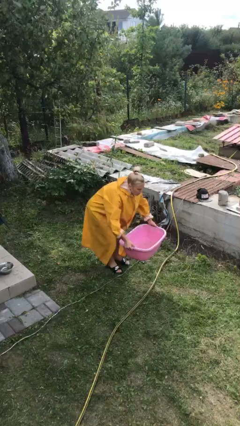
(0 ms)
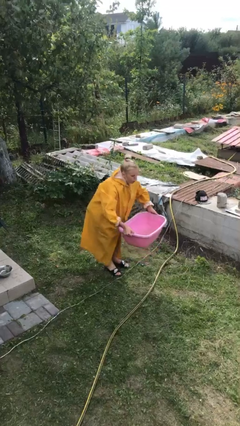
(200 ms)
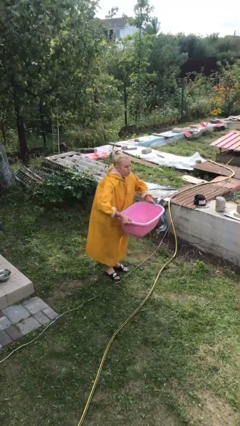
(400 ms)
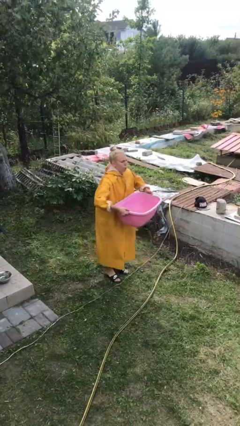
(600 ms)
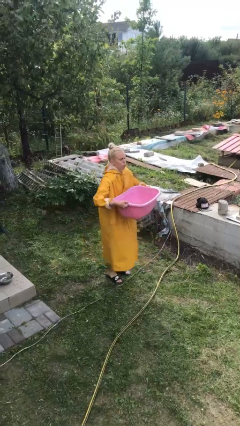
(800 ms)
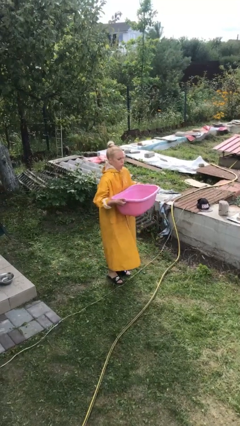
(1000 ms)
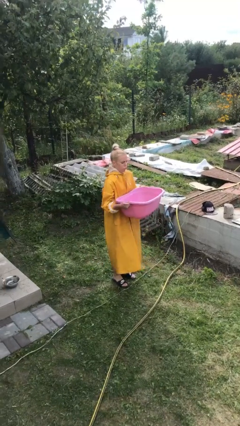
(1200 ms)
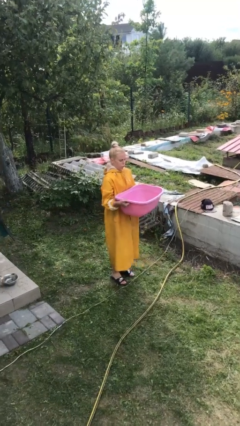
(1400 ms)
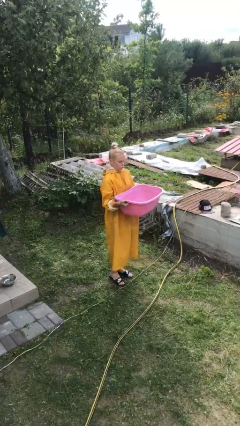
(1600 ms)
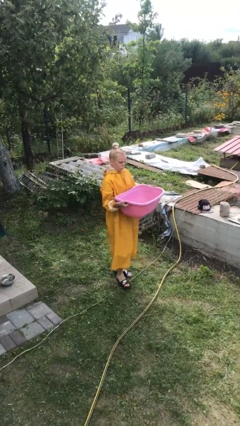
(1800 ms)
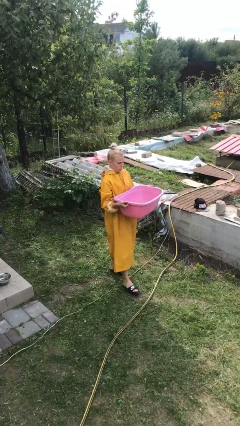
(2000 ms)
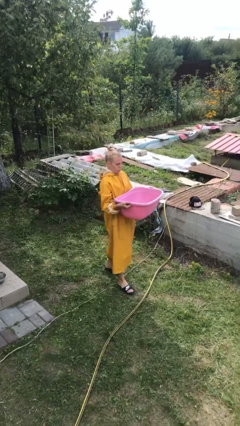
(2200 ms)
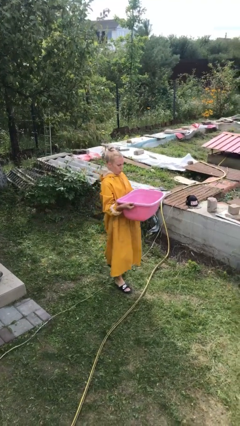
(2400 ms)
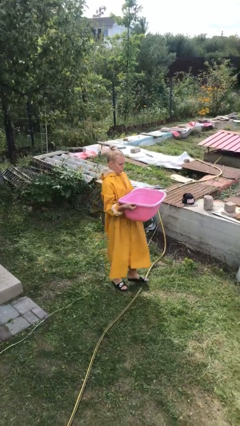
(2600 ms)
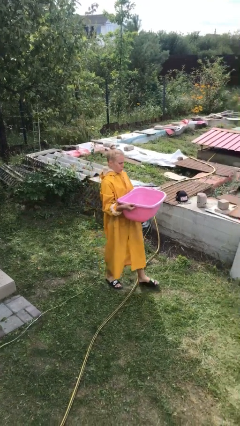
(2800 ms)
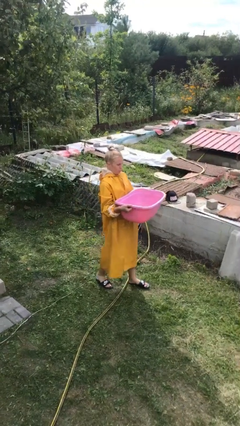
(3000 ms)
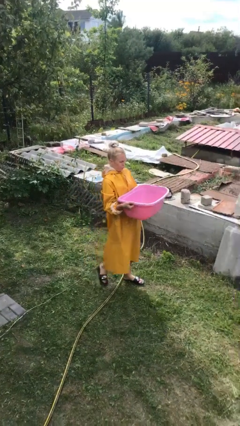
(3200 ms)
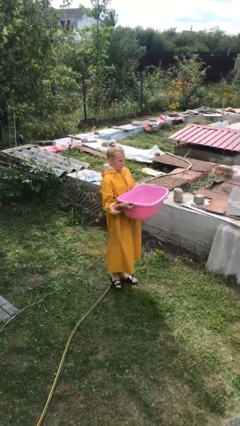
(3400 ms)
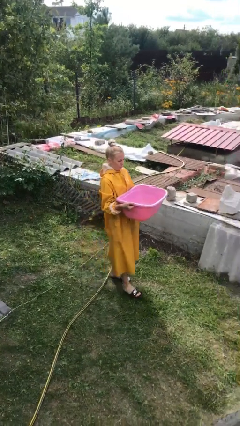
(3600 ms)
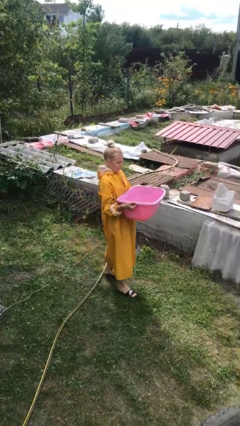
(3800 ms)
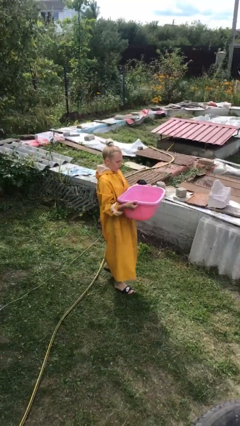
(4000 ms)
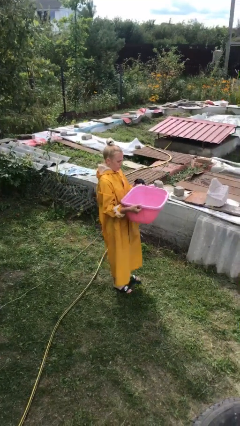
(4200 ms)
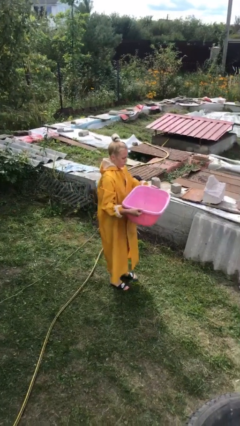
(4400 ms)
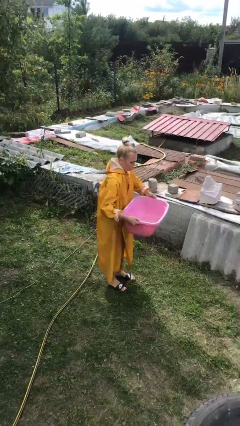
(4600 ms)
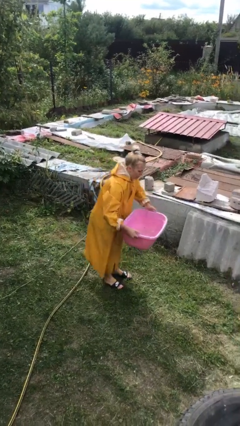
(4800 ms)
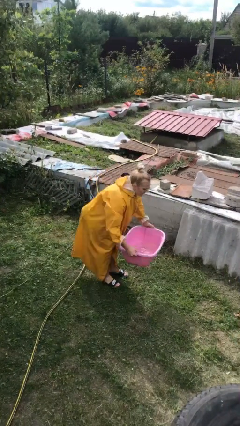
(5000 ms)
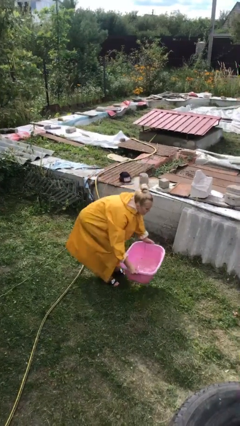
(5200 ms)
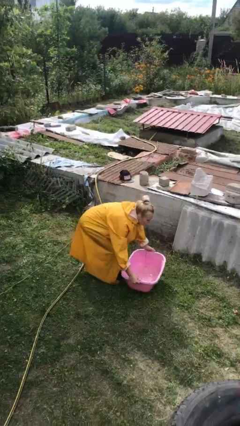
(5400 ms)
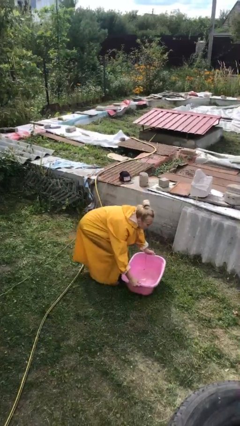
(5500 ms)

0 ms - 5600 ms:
person carries heavy object

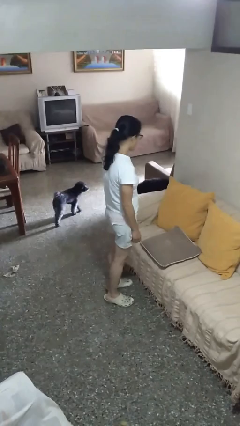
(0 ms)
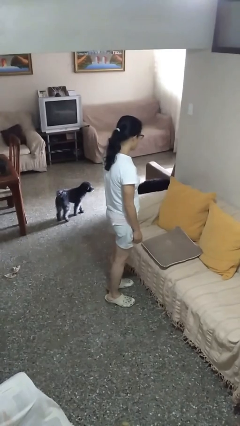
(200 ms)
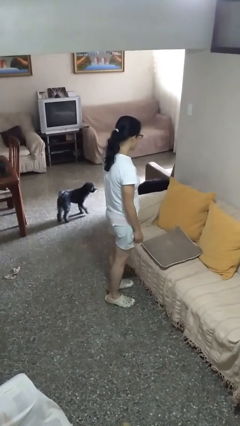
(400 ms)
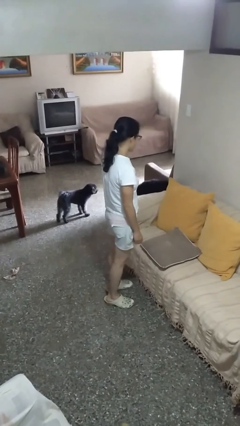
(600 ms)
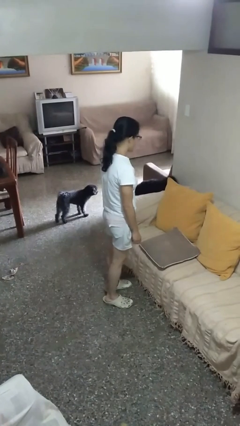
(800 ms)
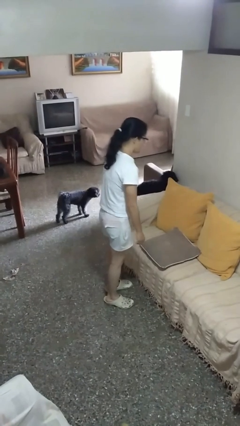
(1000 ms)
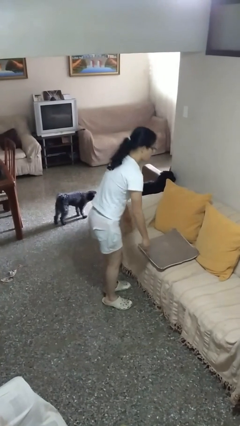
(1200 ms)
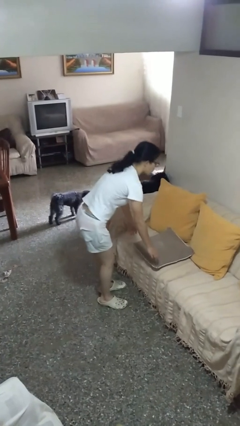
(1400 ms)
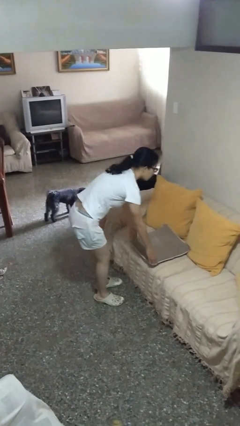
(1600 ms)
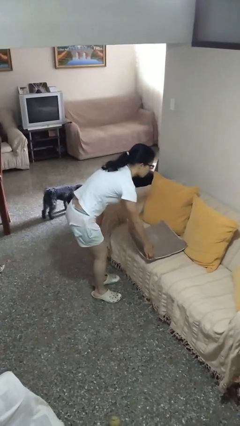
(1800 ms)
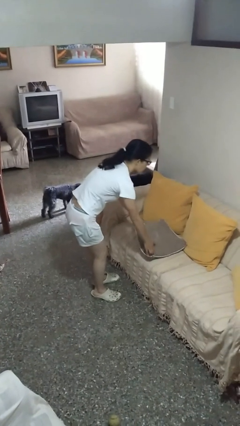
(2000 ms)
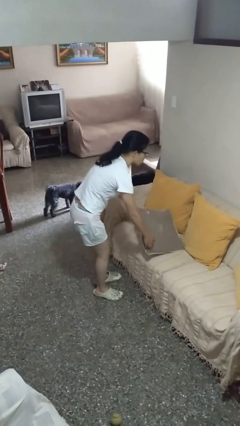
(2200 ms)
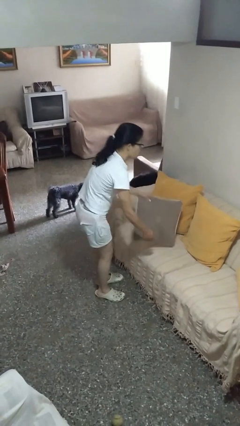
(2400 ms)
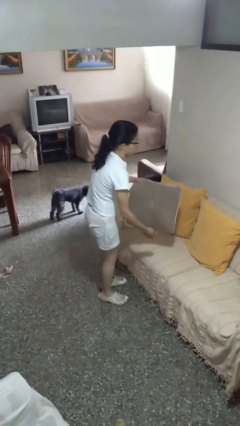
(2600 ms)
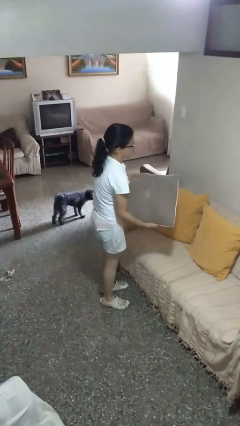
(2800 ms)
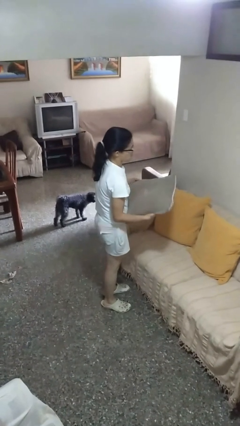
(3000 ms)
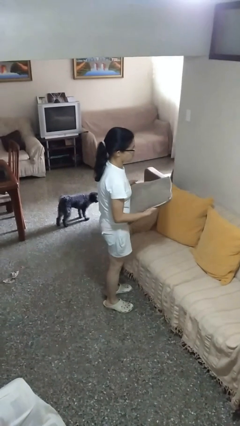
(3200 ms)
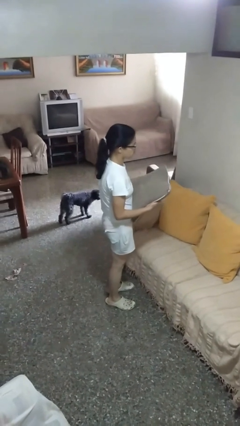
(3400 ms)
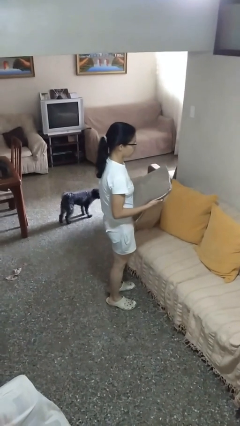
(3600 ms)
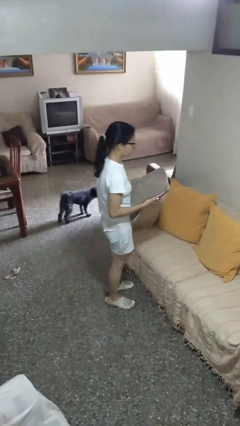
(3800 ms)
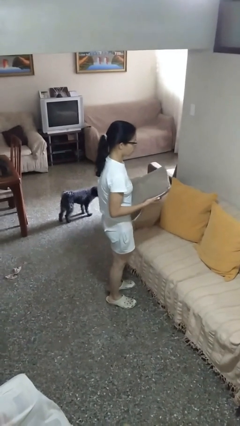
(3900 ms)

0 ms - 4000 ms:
person picks up object from couch

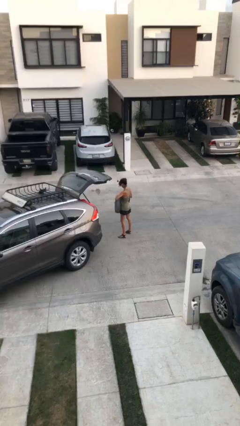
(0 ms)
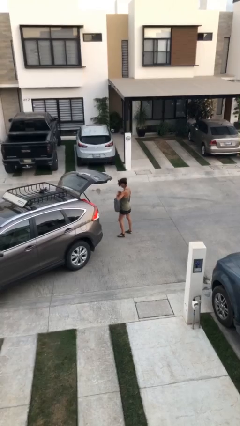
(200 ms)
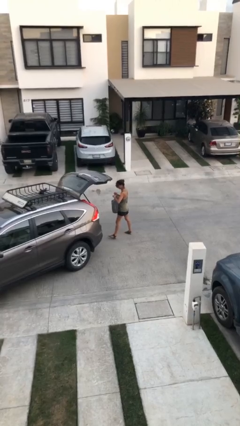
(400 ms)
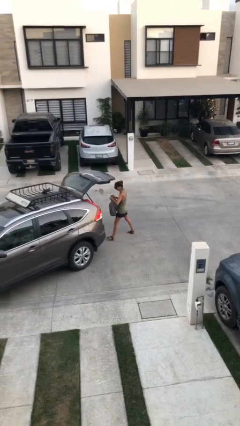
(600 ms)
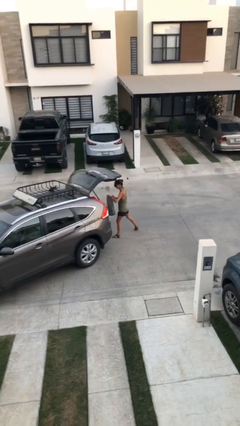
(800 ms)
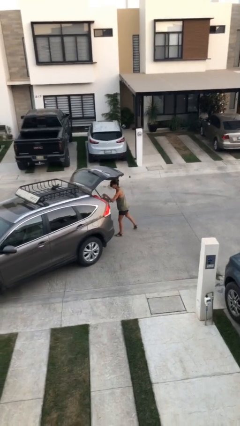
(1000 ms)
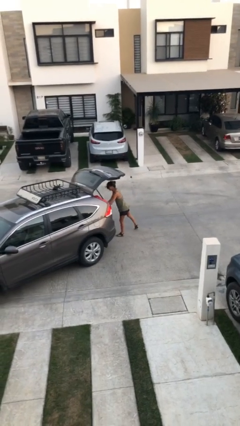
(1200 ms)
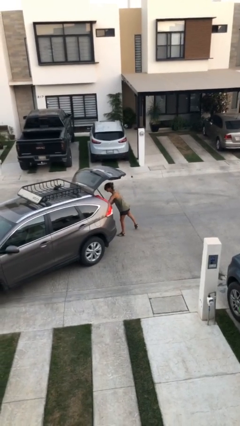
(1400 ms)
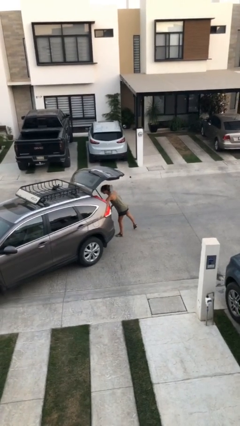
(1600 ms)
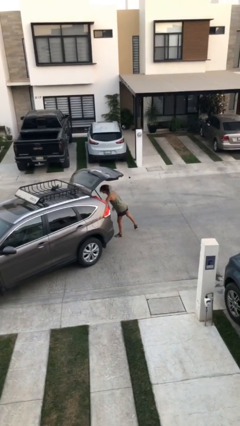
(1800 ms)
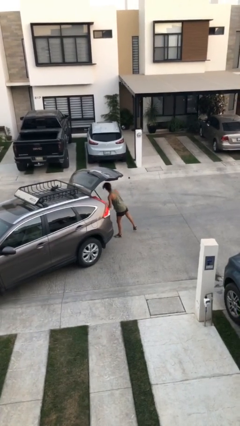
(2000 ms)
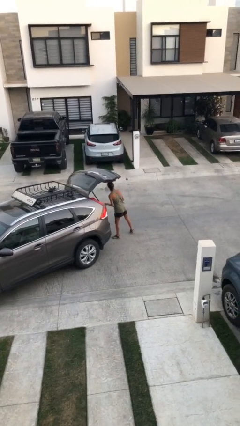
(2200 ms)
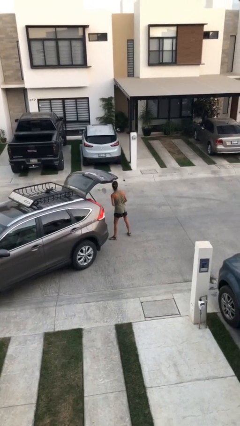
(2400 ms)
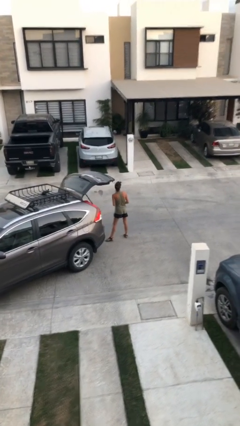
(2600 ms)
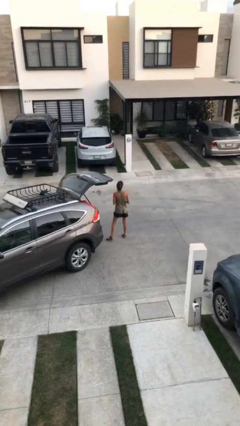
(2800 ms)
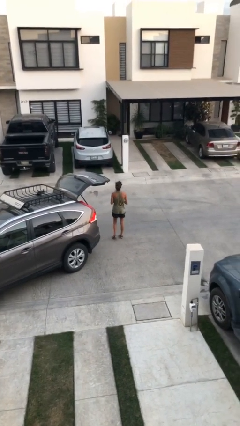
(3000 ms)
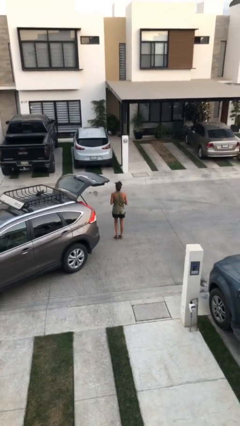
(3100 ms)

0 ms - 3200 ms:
person loads car

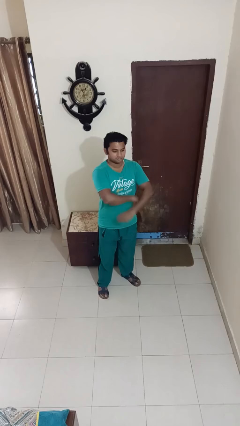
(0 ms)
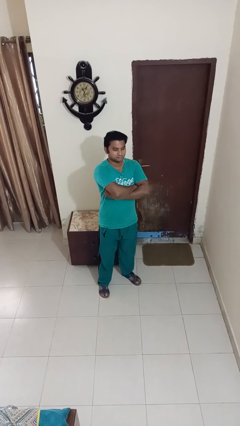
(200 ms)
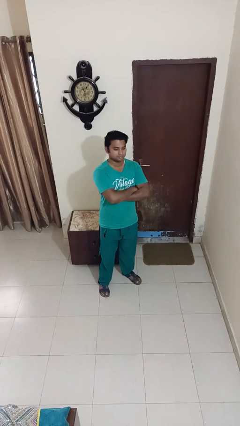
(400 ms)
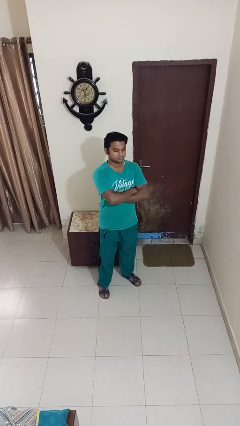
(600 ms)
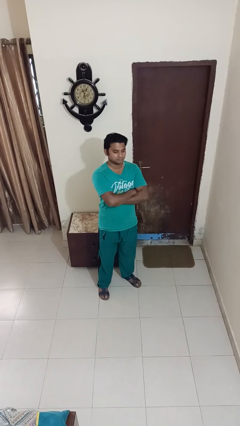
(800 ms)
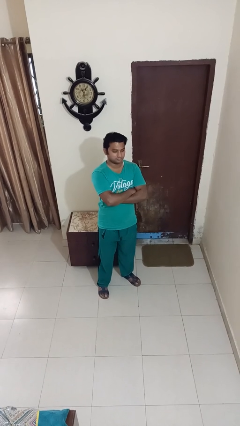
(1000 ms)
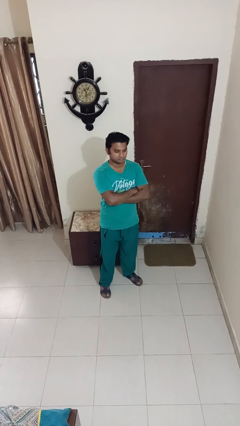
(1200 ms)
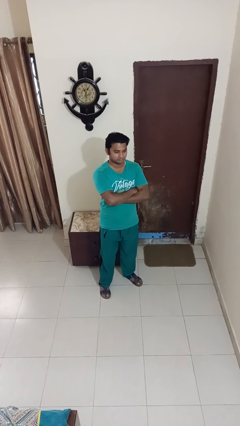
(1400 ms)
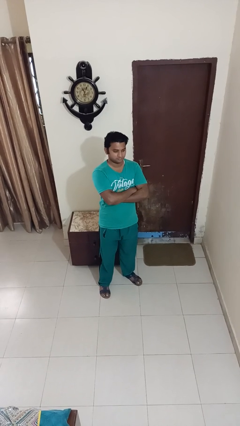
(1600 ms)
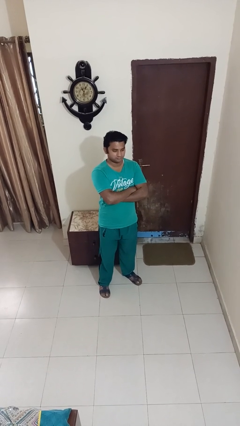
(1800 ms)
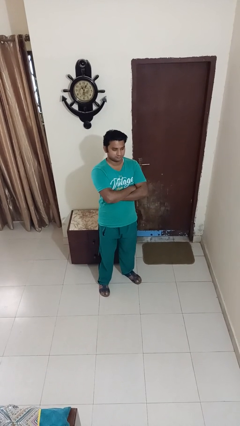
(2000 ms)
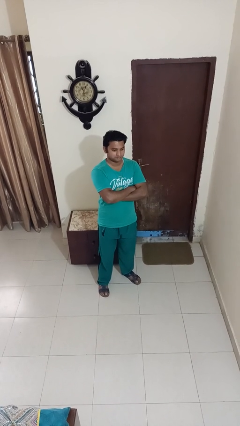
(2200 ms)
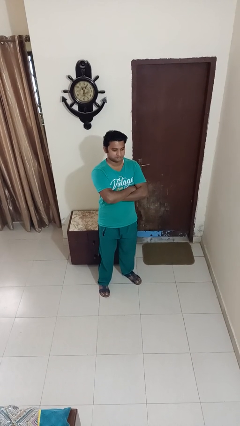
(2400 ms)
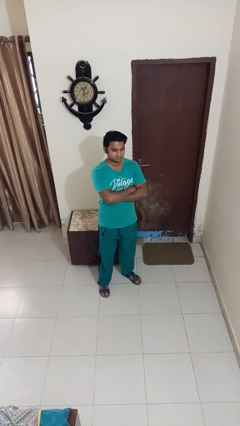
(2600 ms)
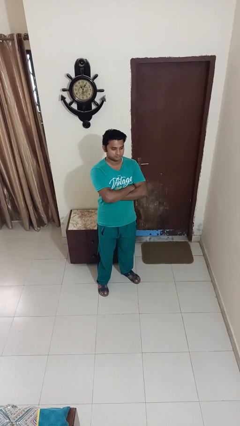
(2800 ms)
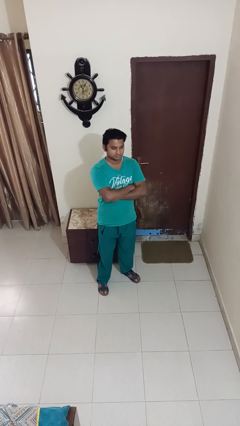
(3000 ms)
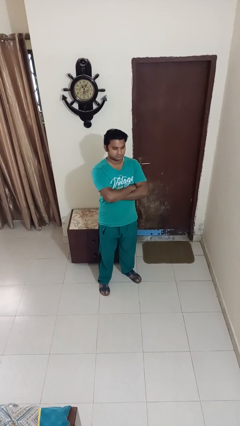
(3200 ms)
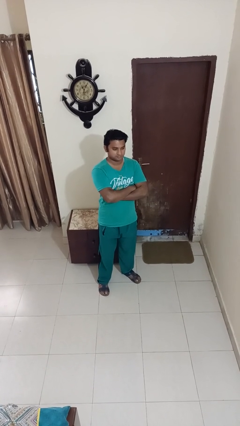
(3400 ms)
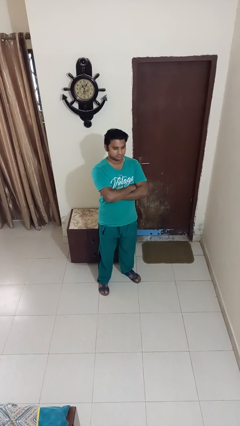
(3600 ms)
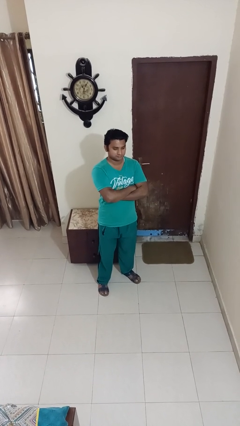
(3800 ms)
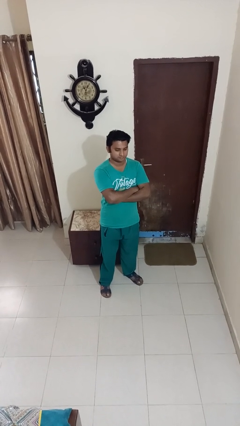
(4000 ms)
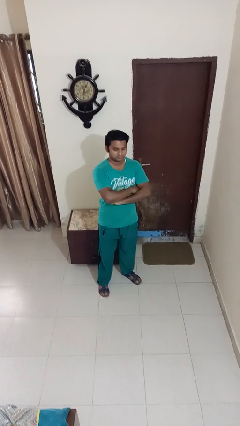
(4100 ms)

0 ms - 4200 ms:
person gestures arms x

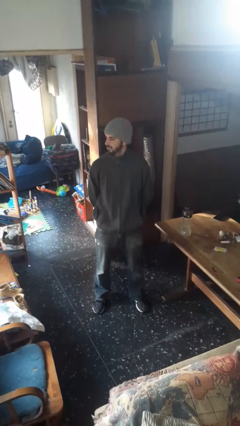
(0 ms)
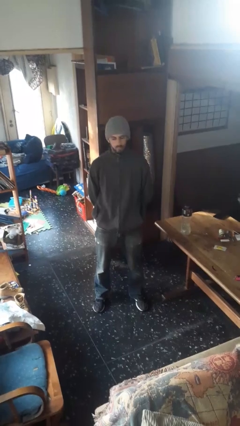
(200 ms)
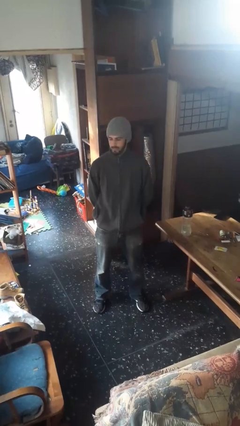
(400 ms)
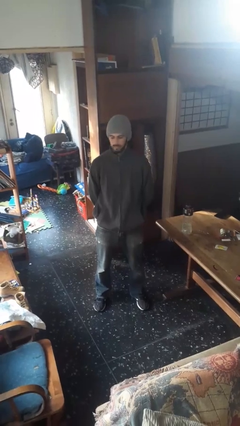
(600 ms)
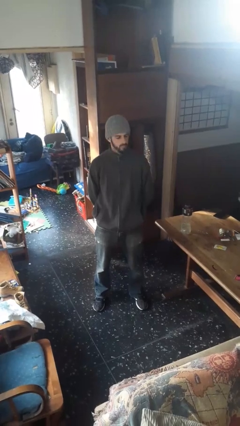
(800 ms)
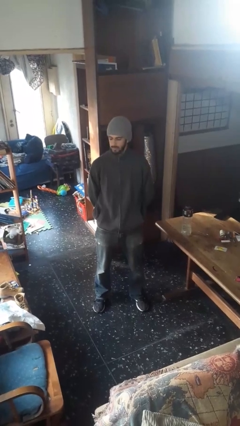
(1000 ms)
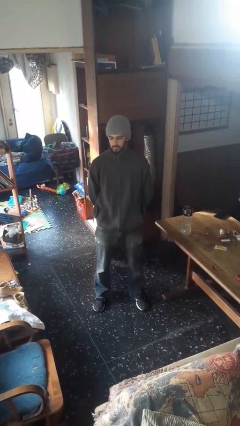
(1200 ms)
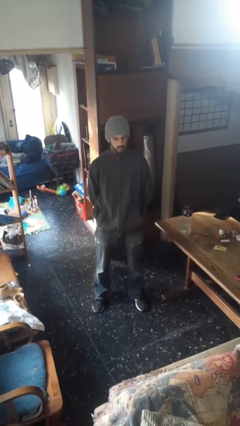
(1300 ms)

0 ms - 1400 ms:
person shakes head
